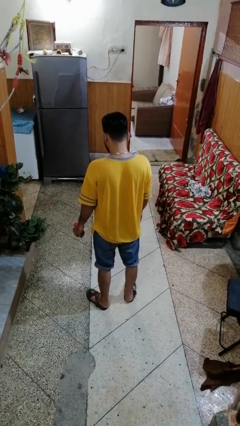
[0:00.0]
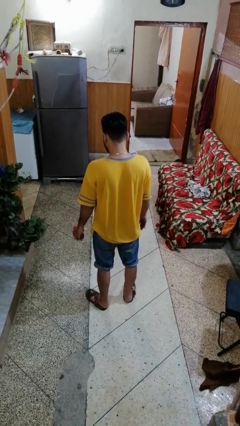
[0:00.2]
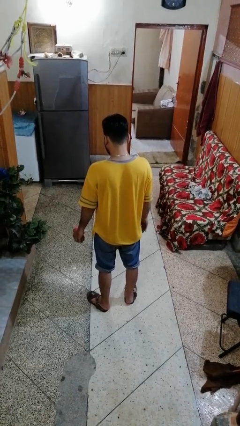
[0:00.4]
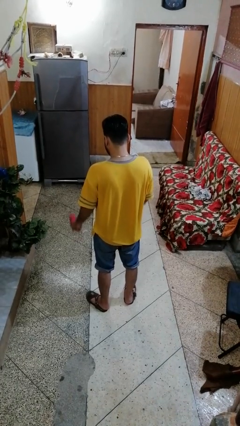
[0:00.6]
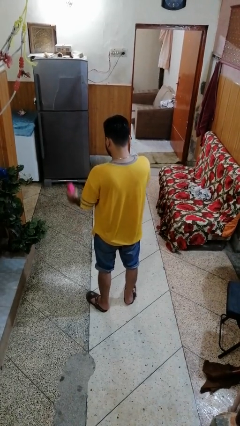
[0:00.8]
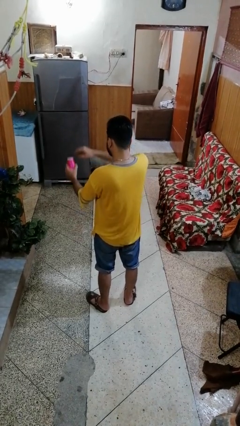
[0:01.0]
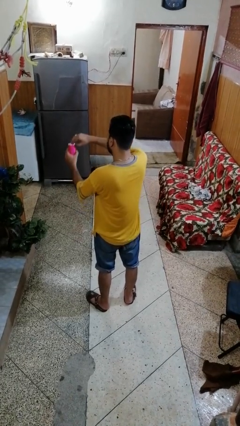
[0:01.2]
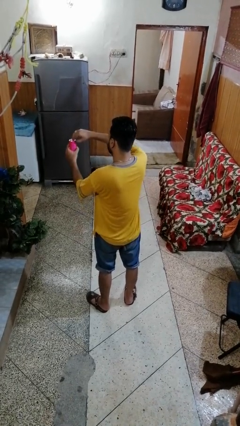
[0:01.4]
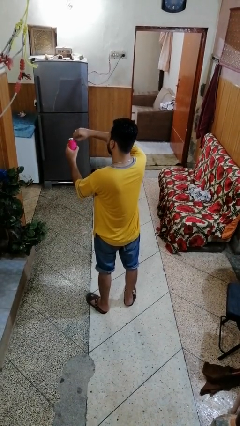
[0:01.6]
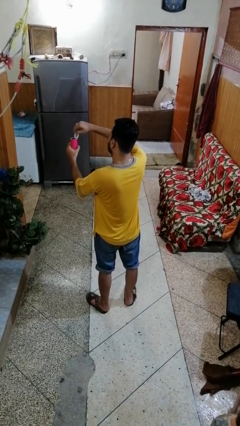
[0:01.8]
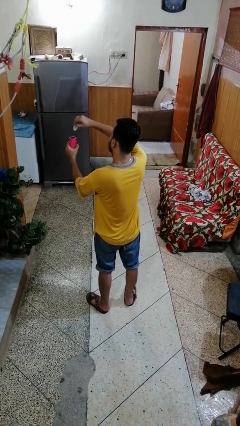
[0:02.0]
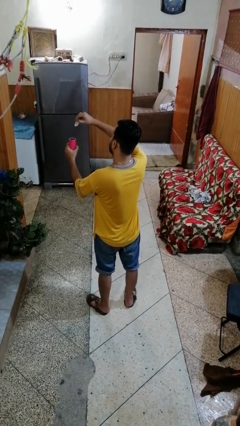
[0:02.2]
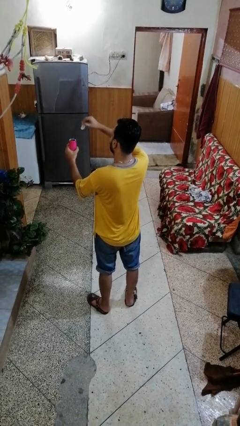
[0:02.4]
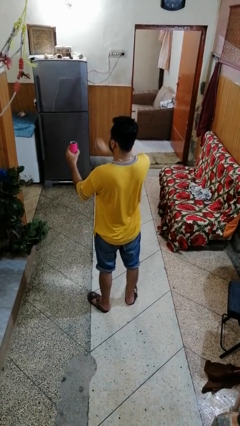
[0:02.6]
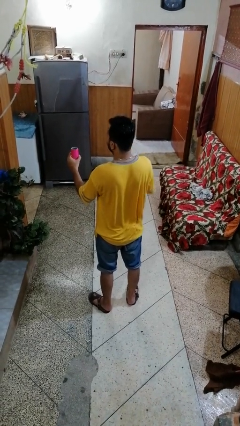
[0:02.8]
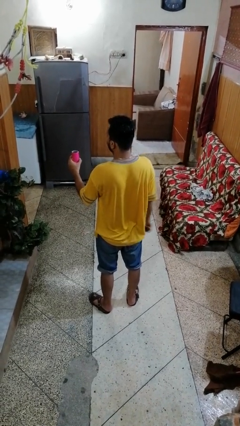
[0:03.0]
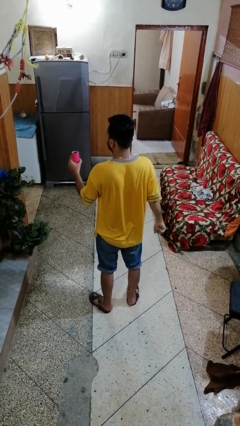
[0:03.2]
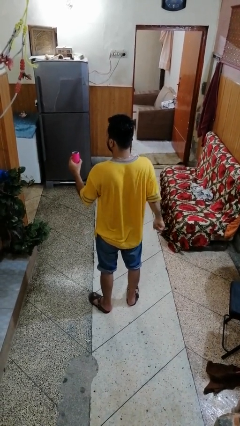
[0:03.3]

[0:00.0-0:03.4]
person opens beverage can

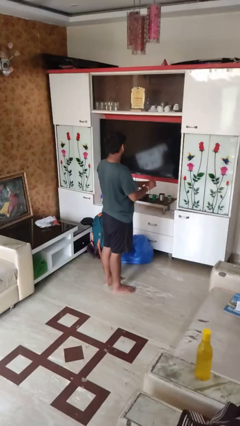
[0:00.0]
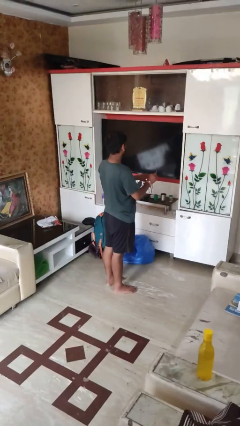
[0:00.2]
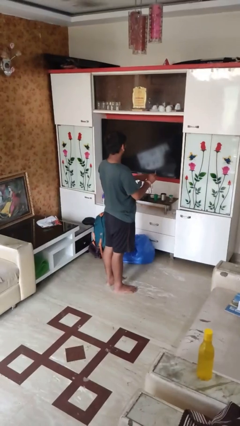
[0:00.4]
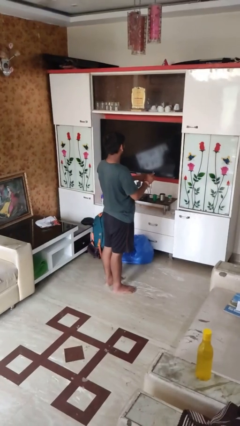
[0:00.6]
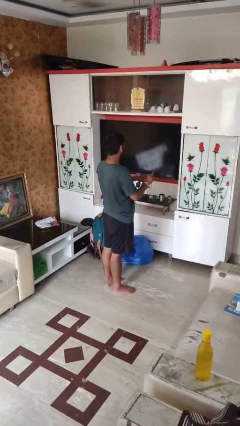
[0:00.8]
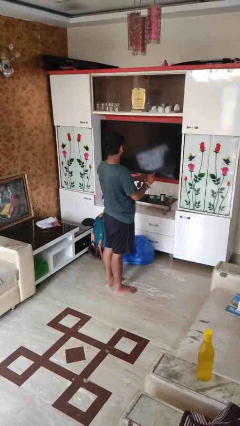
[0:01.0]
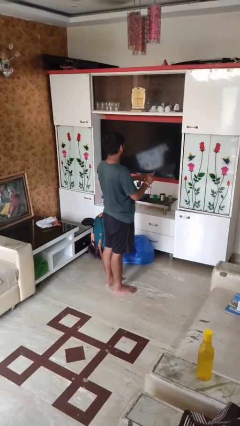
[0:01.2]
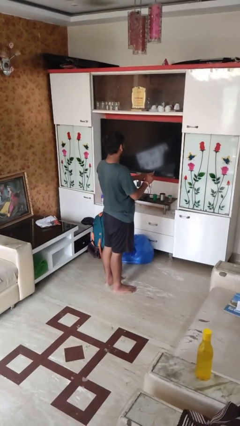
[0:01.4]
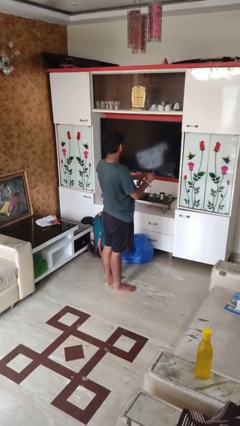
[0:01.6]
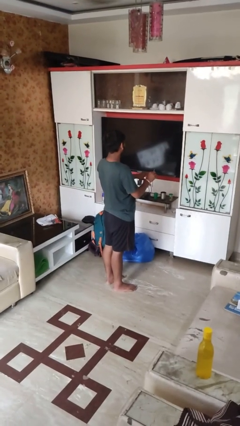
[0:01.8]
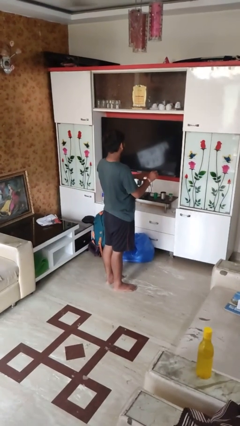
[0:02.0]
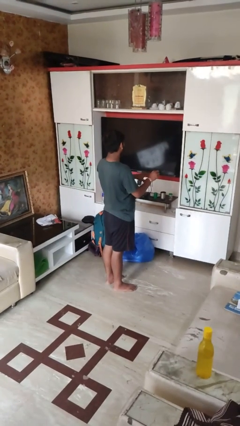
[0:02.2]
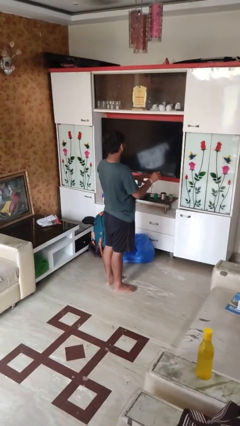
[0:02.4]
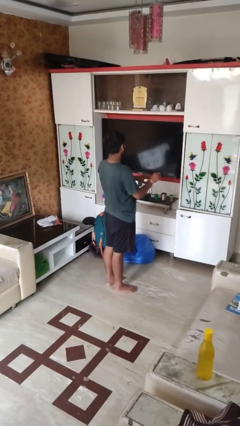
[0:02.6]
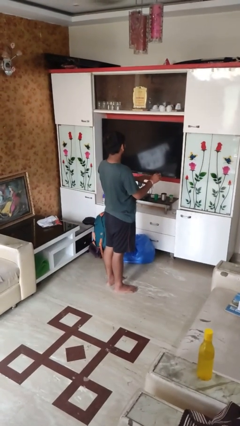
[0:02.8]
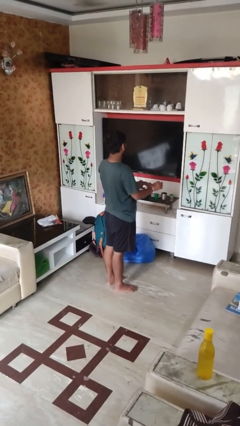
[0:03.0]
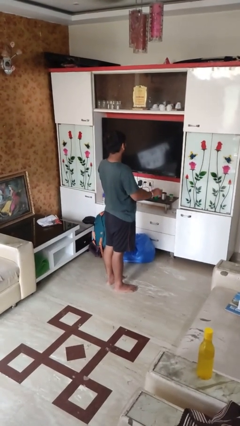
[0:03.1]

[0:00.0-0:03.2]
person files fingernails

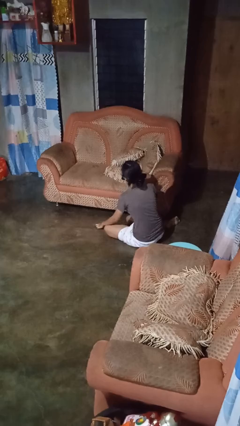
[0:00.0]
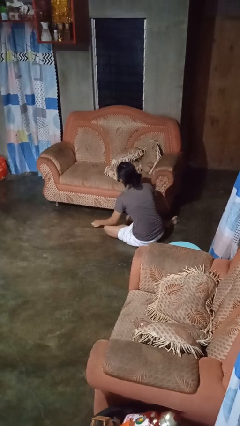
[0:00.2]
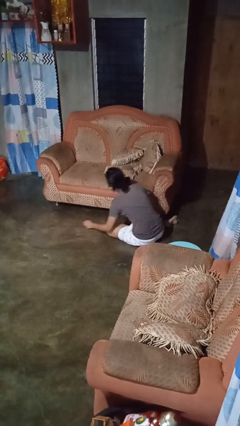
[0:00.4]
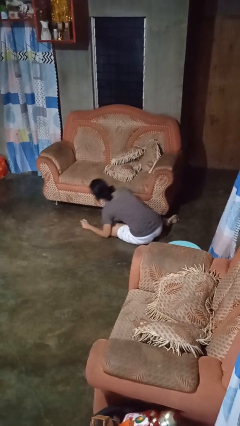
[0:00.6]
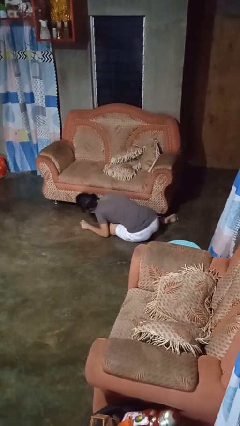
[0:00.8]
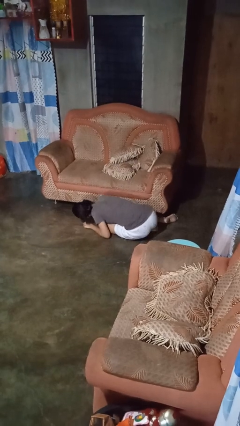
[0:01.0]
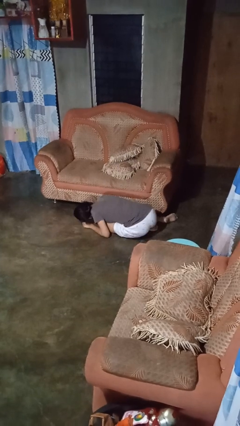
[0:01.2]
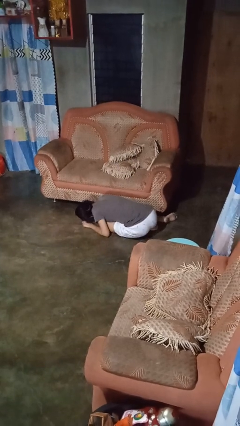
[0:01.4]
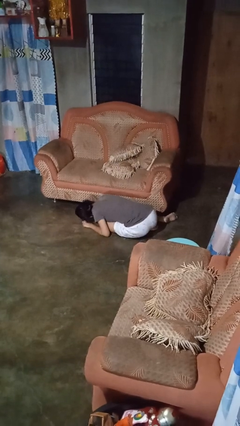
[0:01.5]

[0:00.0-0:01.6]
person searches under couch

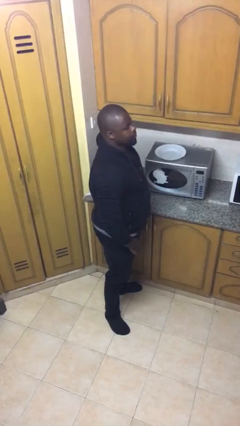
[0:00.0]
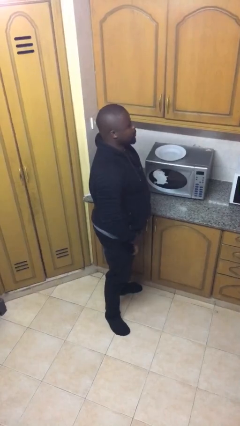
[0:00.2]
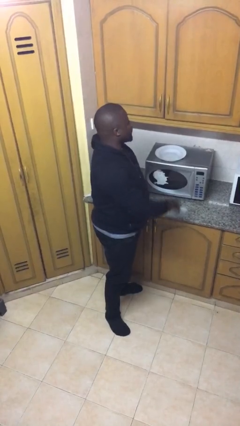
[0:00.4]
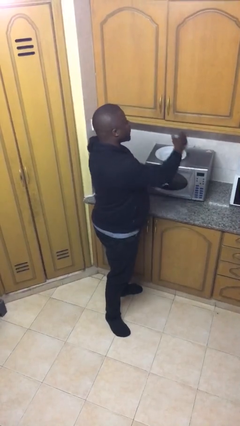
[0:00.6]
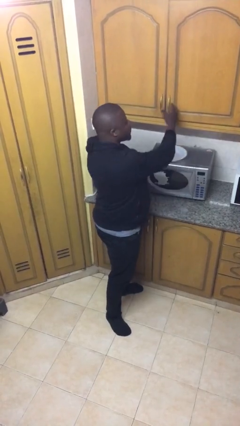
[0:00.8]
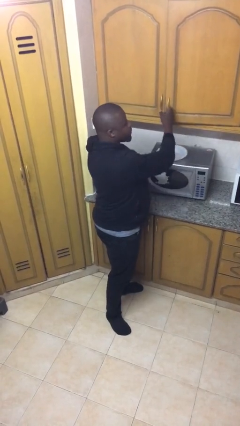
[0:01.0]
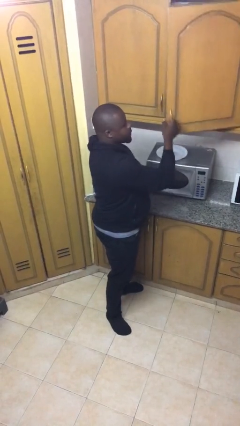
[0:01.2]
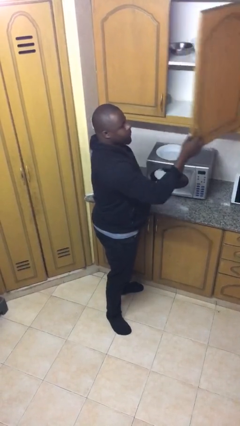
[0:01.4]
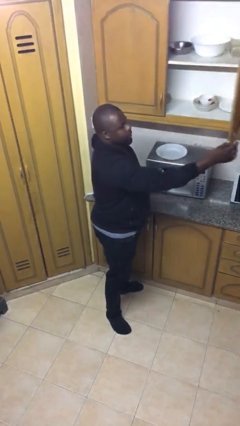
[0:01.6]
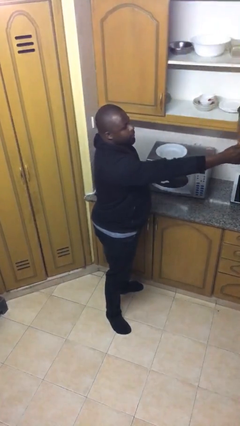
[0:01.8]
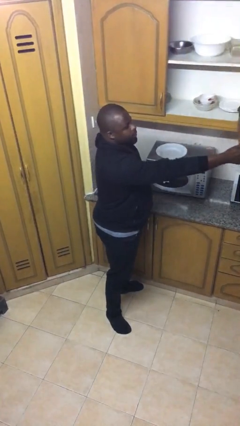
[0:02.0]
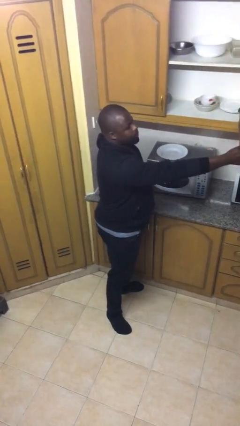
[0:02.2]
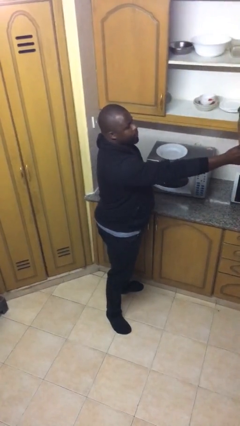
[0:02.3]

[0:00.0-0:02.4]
person opens cabinet

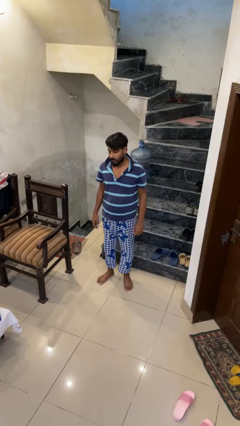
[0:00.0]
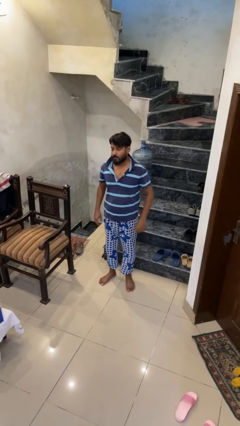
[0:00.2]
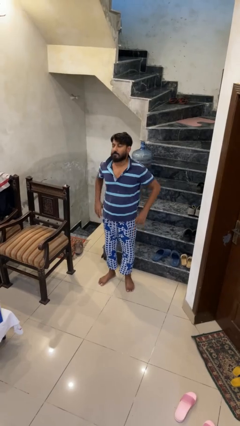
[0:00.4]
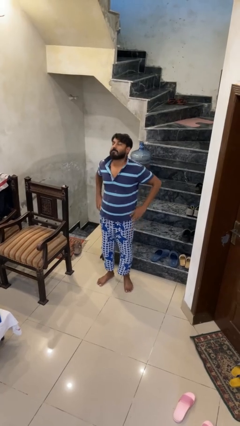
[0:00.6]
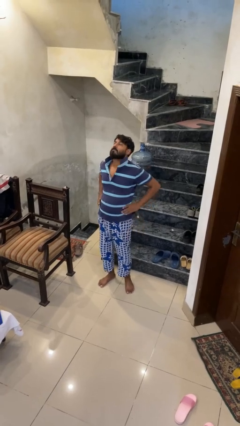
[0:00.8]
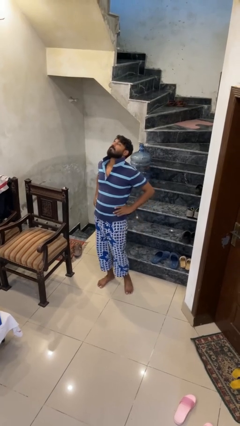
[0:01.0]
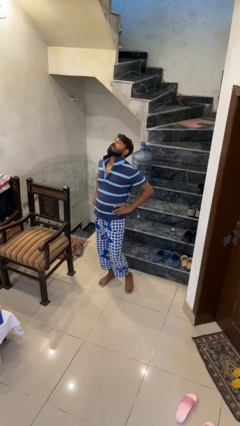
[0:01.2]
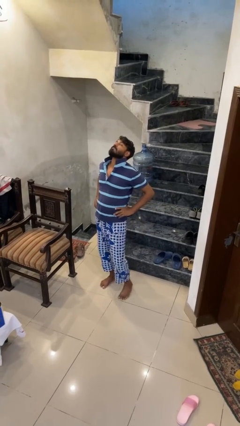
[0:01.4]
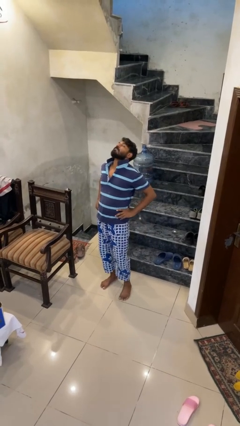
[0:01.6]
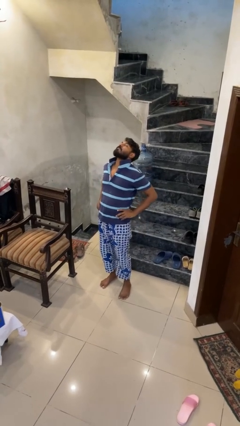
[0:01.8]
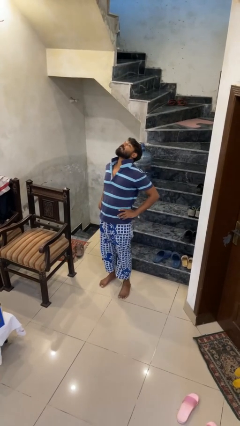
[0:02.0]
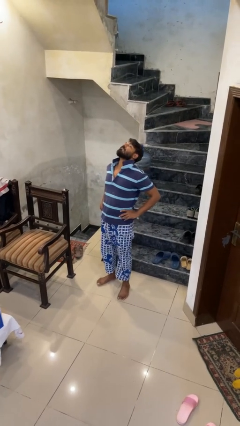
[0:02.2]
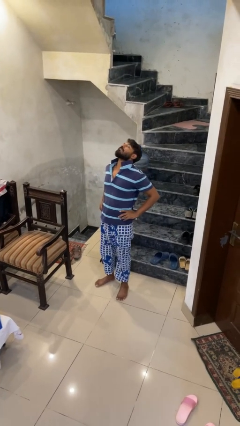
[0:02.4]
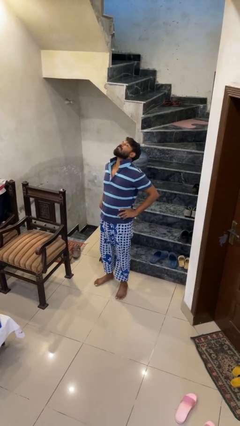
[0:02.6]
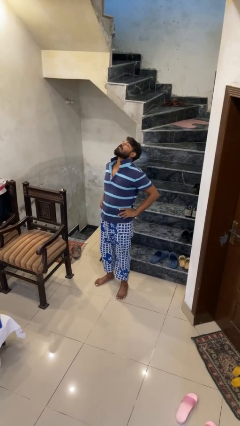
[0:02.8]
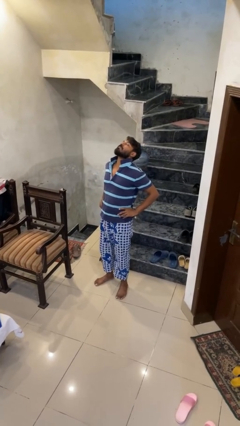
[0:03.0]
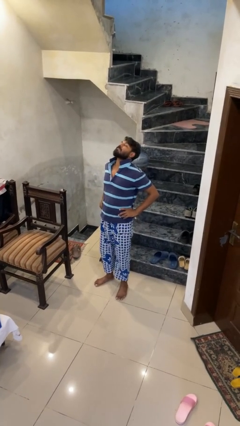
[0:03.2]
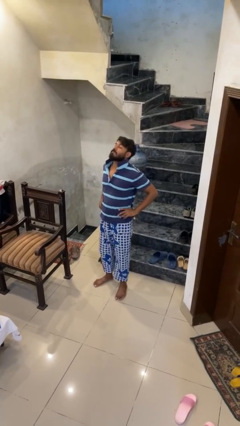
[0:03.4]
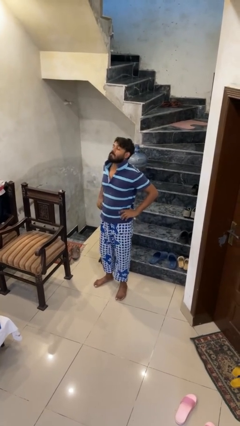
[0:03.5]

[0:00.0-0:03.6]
person stretches back

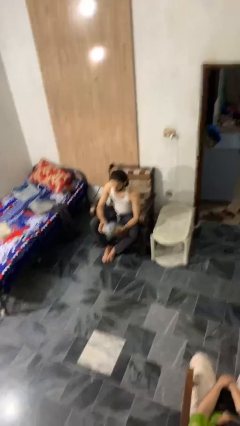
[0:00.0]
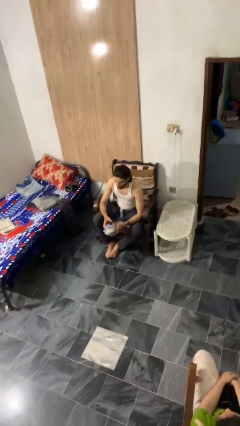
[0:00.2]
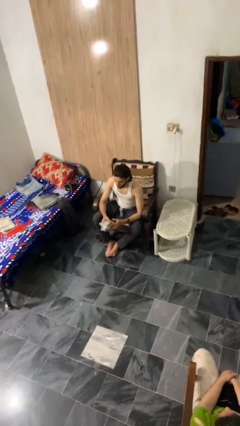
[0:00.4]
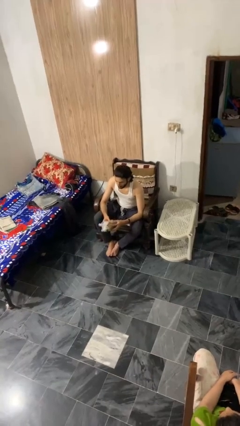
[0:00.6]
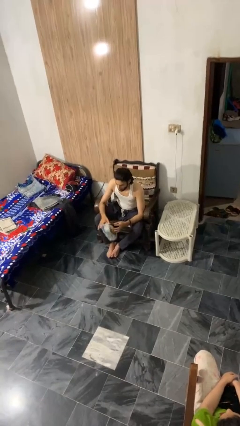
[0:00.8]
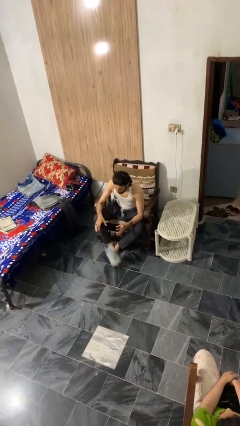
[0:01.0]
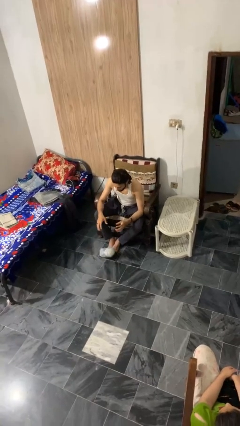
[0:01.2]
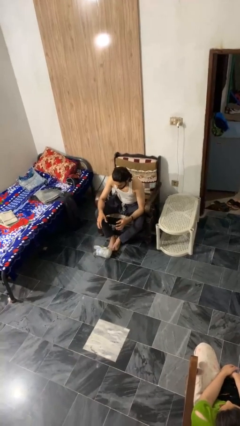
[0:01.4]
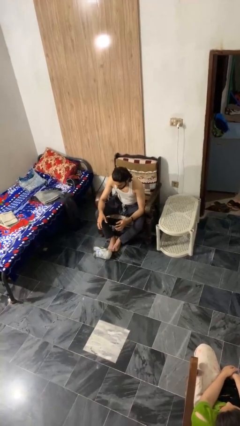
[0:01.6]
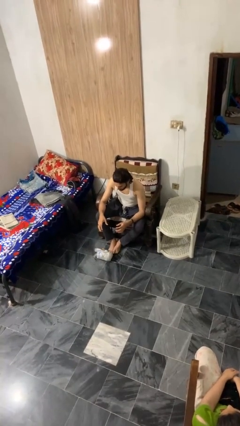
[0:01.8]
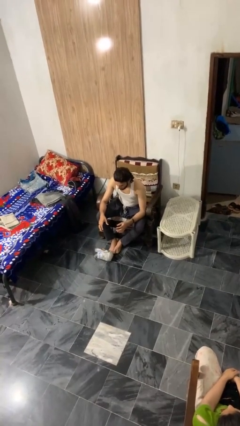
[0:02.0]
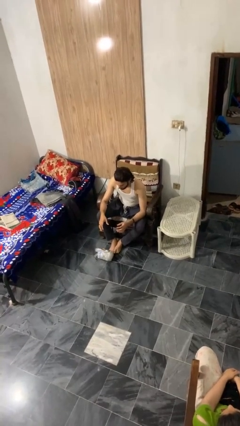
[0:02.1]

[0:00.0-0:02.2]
person drops object

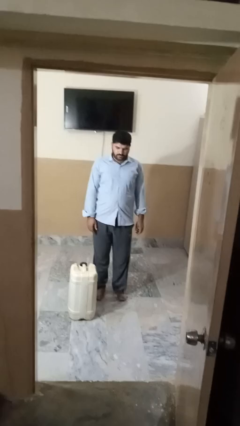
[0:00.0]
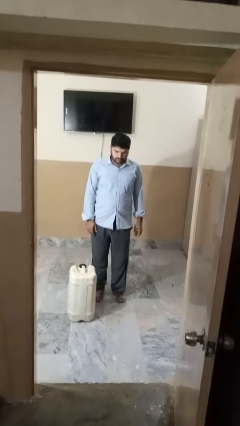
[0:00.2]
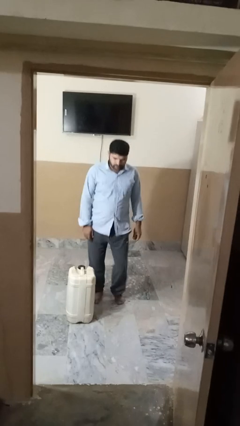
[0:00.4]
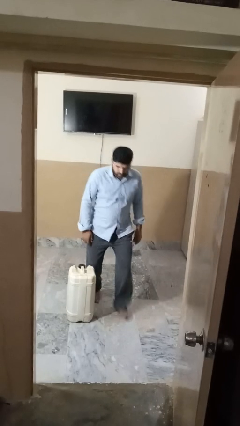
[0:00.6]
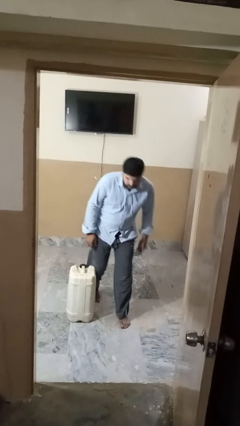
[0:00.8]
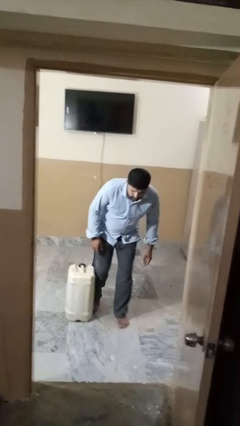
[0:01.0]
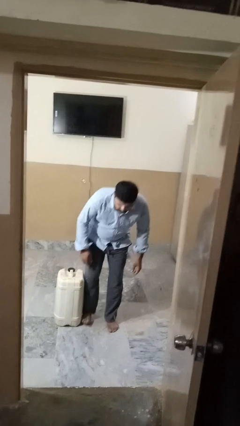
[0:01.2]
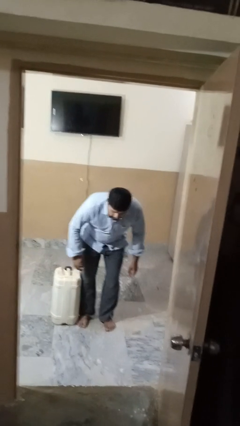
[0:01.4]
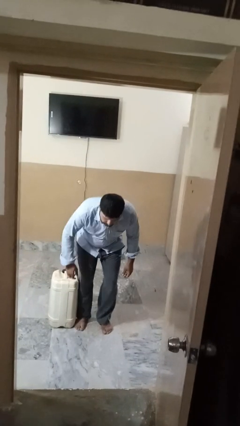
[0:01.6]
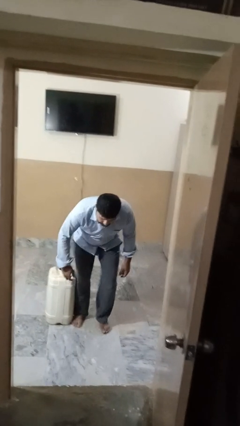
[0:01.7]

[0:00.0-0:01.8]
person trips on object on floor
